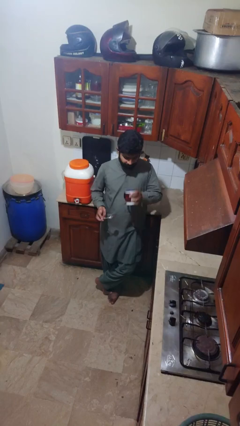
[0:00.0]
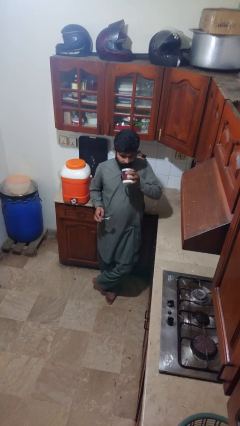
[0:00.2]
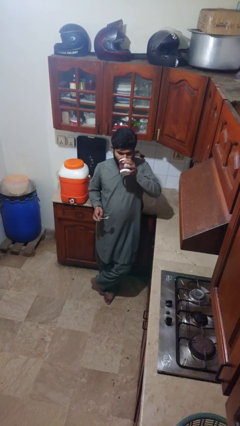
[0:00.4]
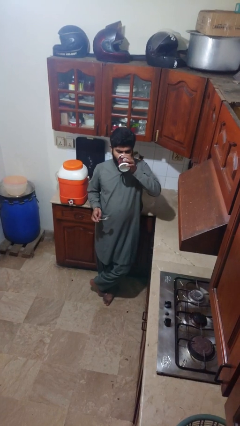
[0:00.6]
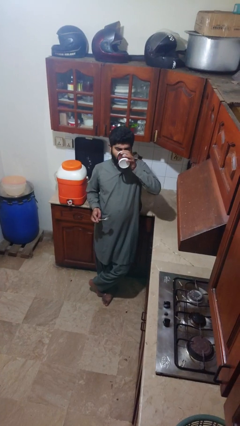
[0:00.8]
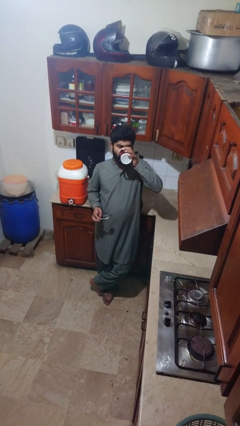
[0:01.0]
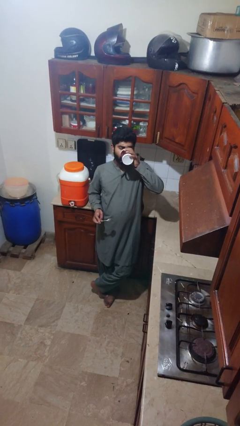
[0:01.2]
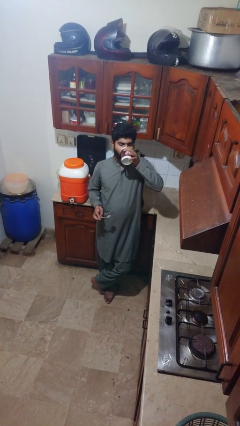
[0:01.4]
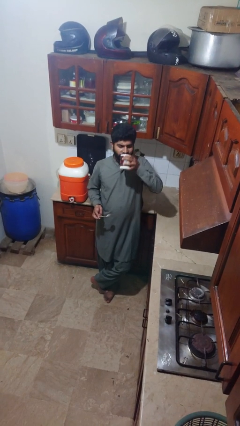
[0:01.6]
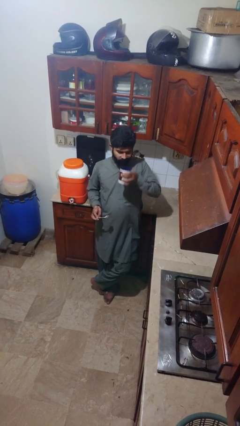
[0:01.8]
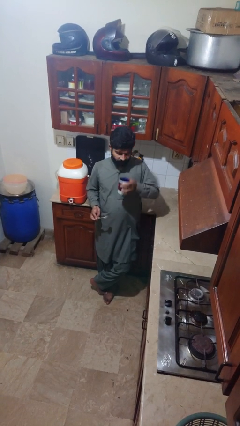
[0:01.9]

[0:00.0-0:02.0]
person drinks from mug

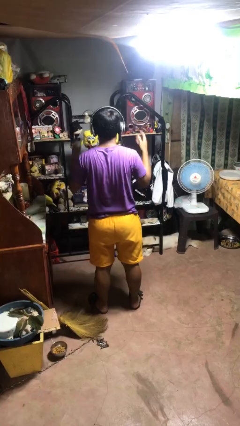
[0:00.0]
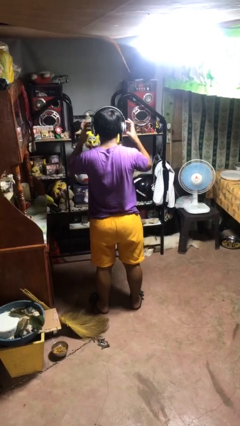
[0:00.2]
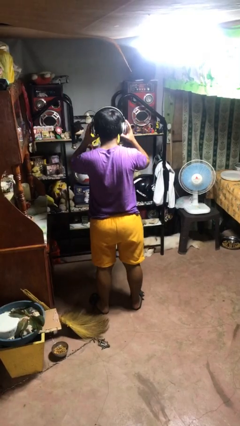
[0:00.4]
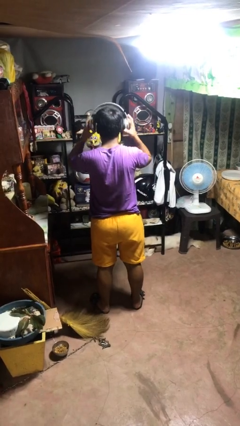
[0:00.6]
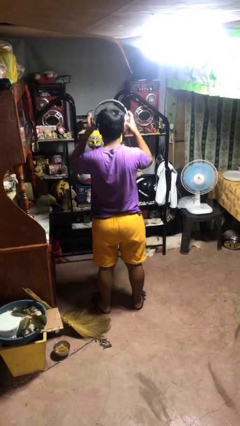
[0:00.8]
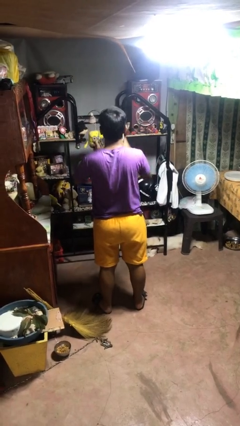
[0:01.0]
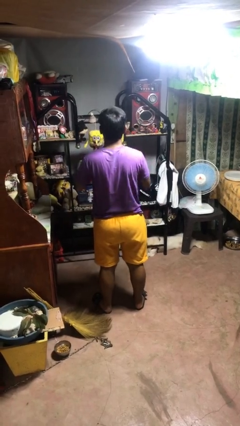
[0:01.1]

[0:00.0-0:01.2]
person takes off headphones

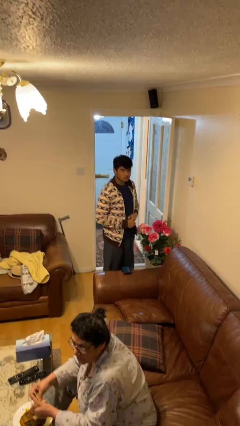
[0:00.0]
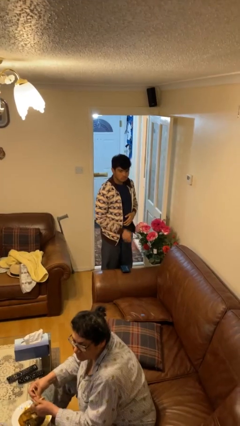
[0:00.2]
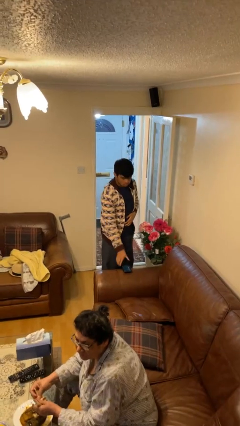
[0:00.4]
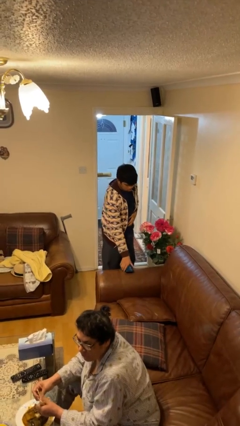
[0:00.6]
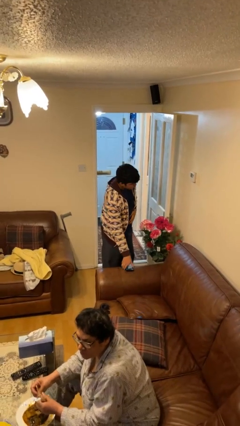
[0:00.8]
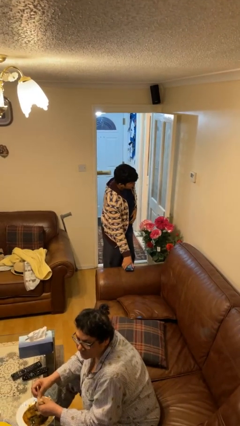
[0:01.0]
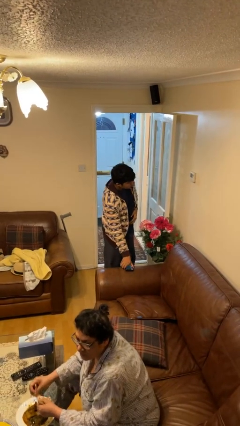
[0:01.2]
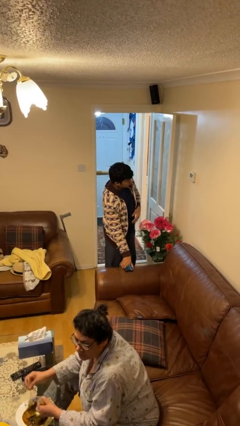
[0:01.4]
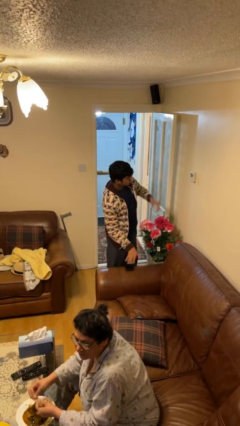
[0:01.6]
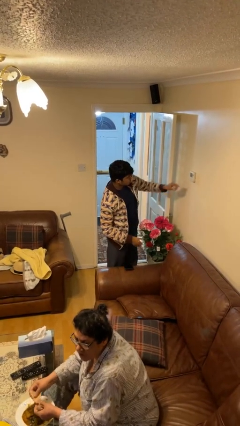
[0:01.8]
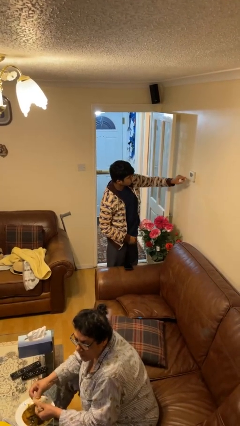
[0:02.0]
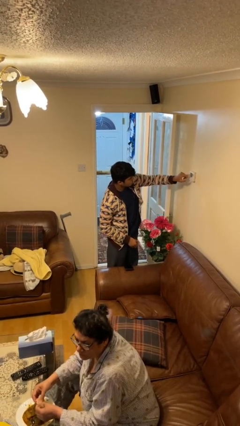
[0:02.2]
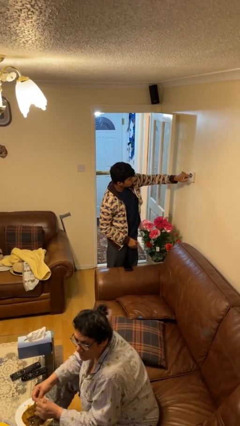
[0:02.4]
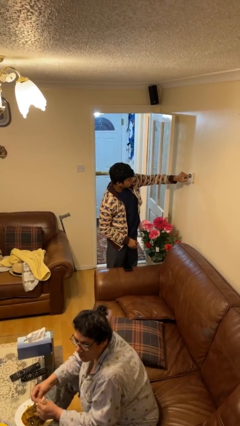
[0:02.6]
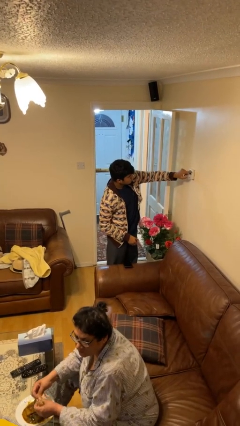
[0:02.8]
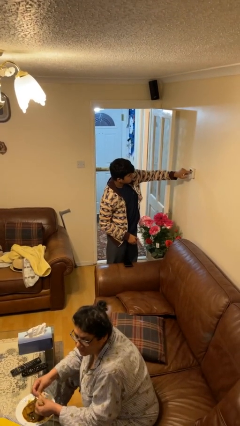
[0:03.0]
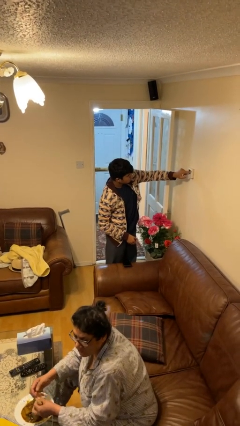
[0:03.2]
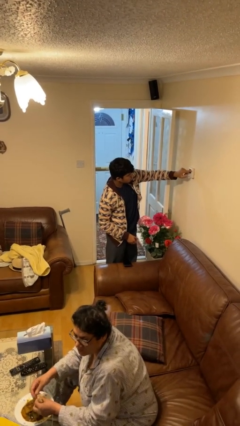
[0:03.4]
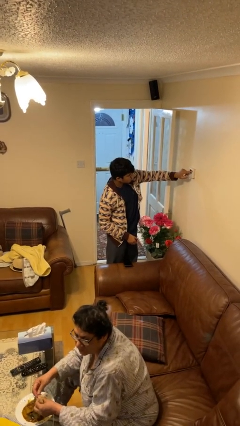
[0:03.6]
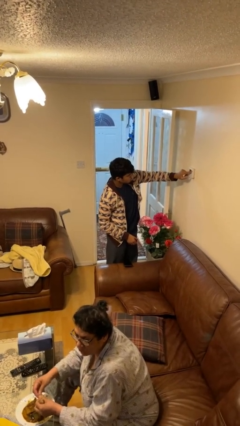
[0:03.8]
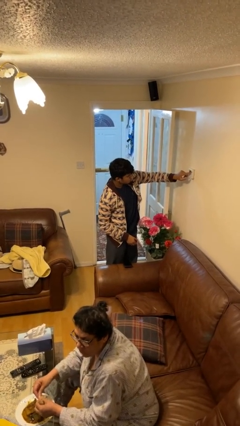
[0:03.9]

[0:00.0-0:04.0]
person adjusts thermostat

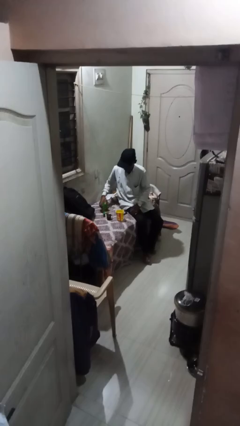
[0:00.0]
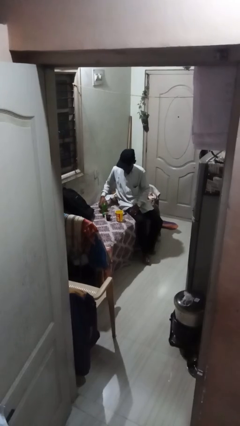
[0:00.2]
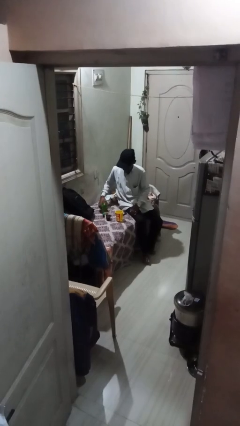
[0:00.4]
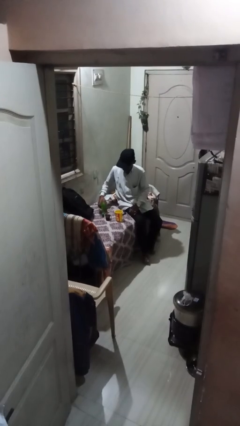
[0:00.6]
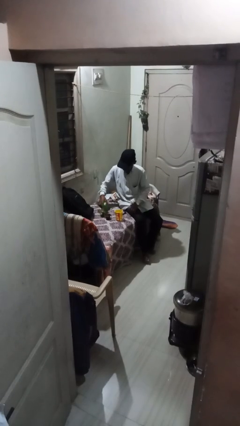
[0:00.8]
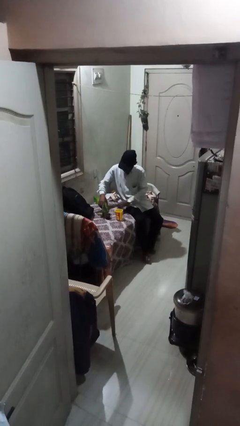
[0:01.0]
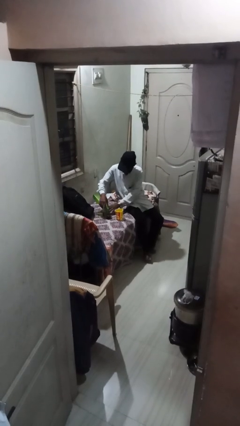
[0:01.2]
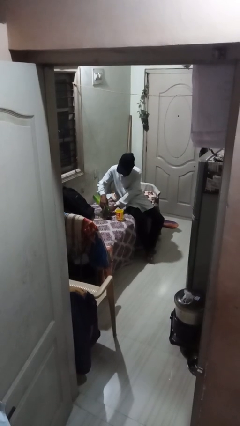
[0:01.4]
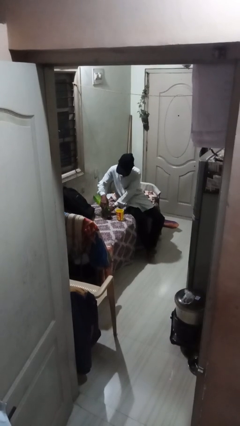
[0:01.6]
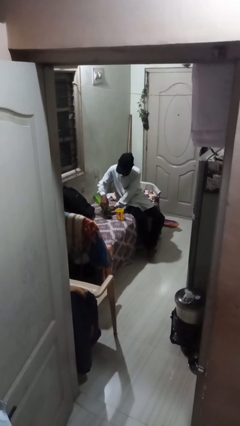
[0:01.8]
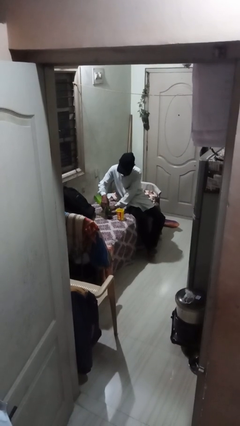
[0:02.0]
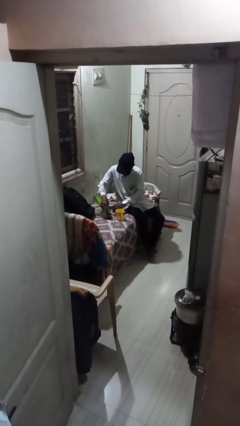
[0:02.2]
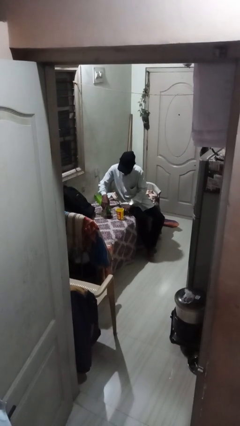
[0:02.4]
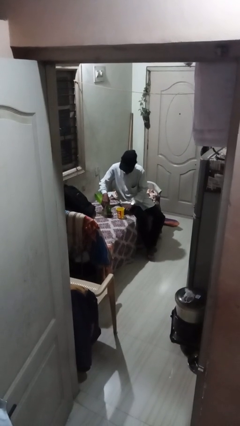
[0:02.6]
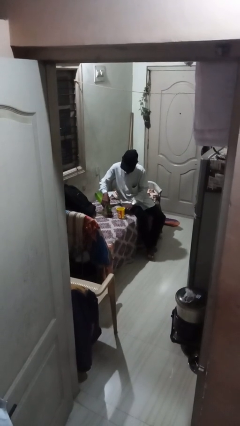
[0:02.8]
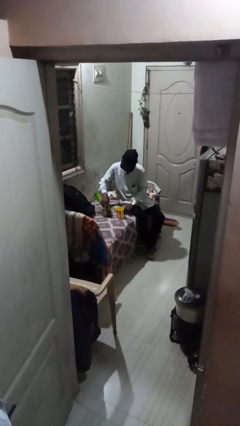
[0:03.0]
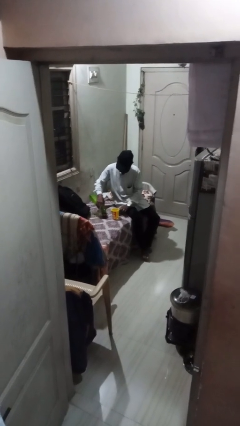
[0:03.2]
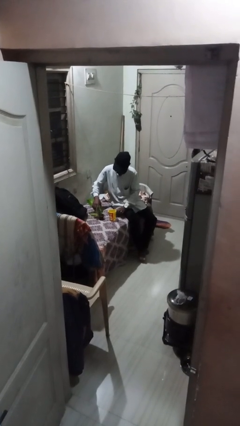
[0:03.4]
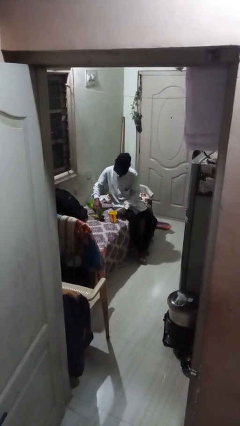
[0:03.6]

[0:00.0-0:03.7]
person pours liquid into cup

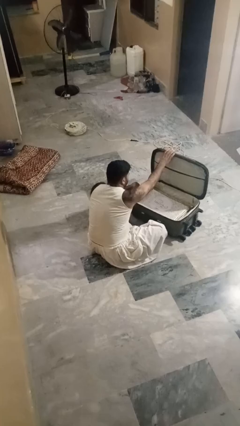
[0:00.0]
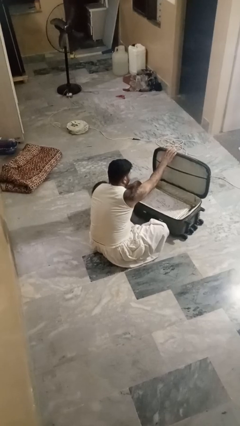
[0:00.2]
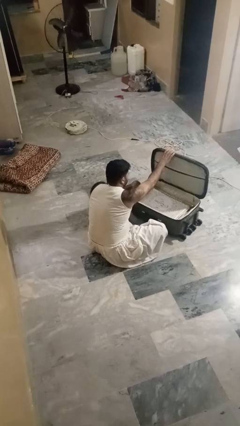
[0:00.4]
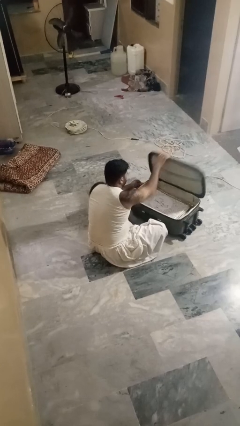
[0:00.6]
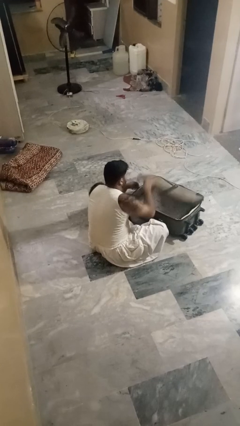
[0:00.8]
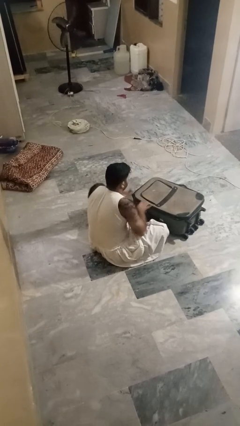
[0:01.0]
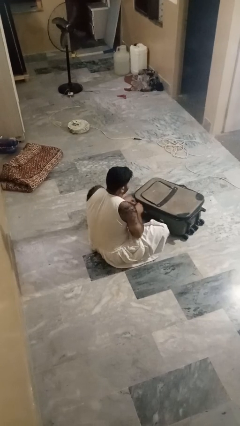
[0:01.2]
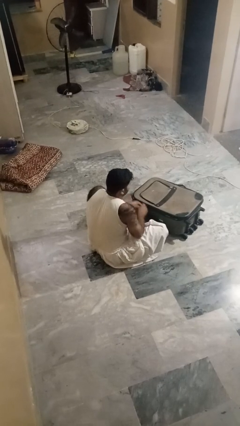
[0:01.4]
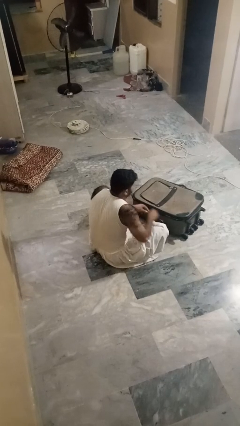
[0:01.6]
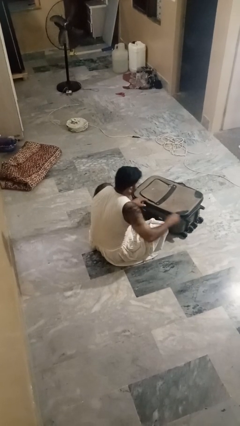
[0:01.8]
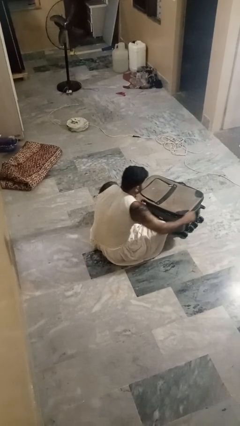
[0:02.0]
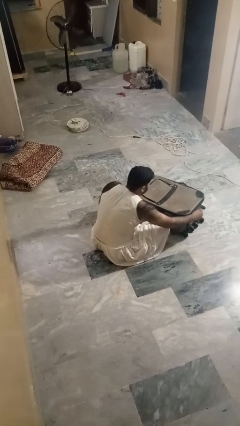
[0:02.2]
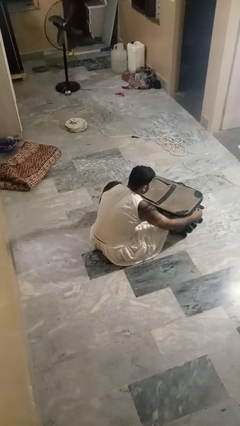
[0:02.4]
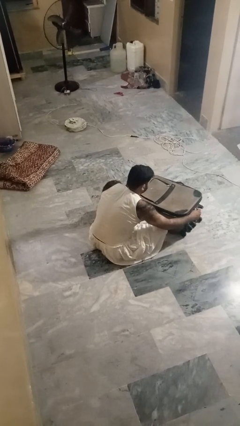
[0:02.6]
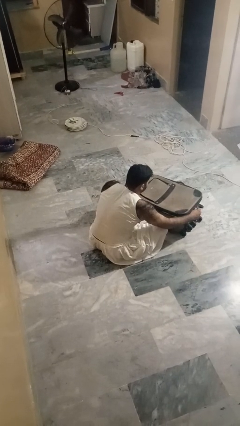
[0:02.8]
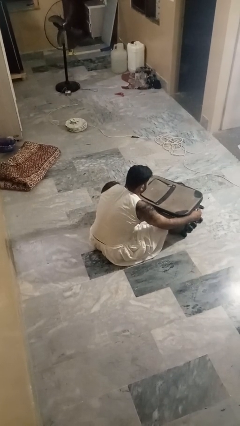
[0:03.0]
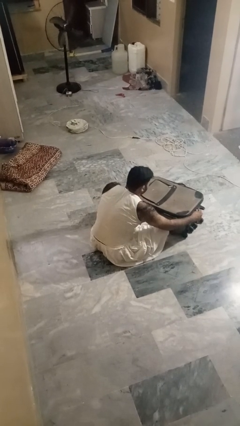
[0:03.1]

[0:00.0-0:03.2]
person closes suitcase

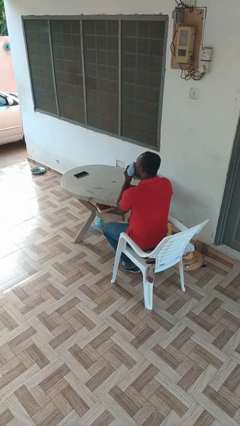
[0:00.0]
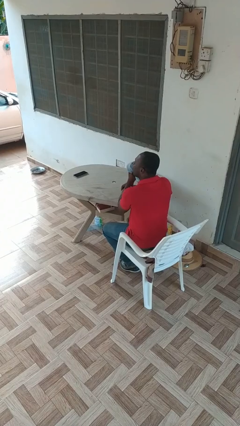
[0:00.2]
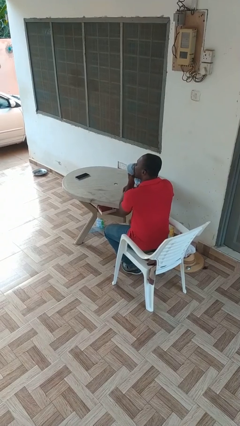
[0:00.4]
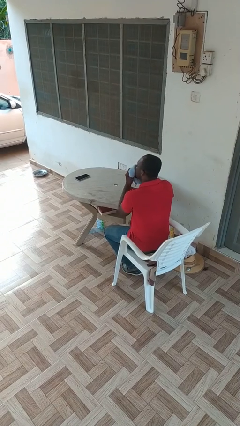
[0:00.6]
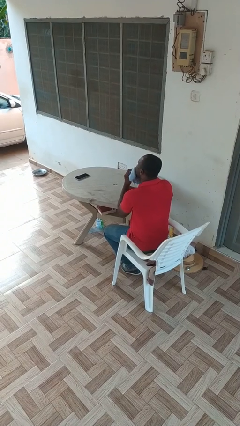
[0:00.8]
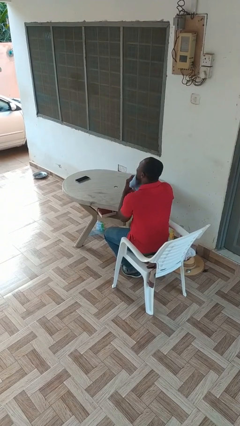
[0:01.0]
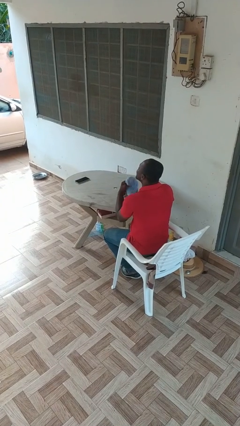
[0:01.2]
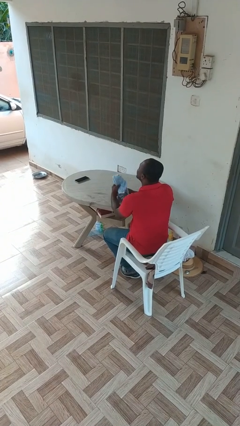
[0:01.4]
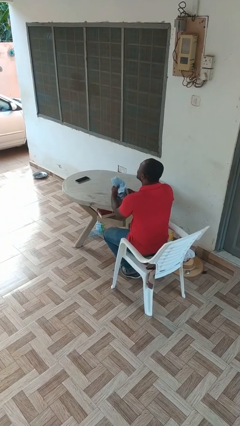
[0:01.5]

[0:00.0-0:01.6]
person wipes mouth with napkin

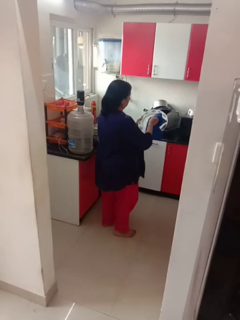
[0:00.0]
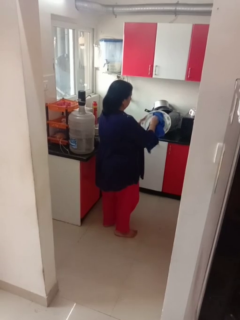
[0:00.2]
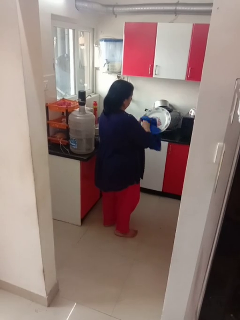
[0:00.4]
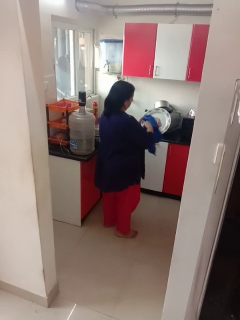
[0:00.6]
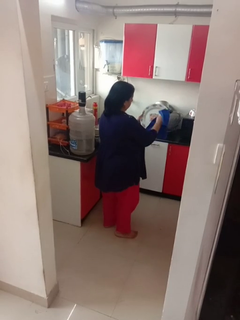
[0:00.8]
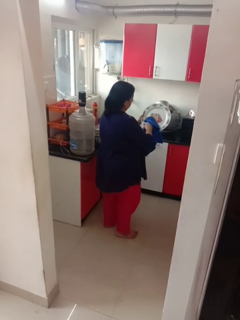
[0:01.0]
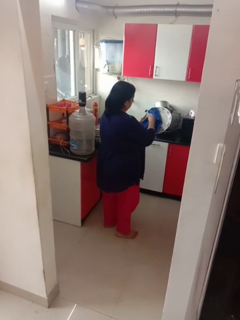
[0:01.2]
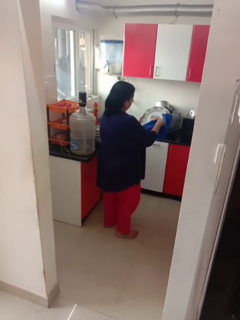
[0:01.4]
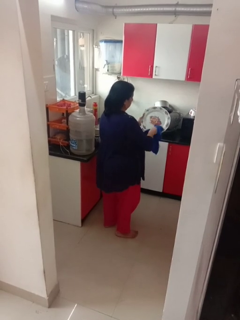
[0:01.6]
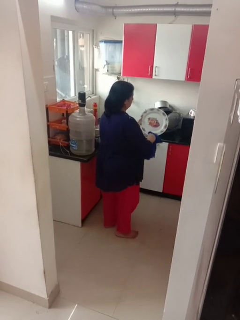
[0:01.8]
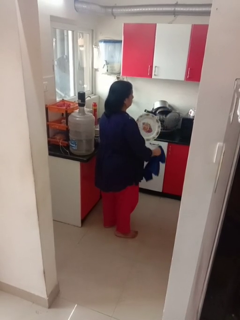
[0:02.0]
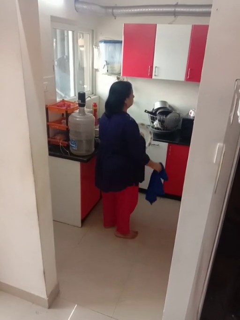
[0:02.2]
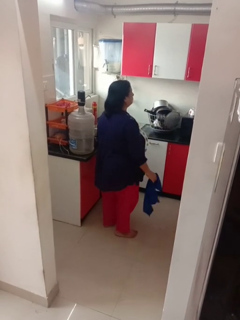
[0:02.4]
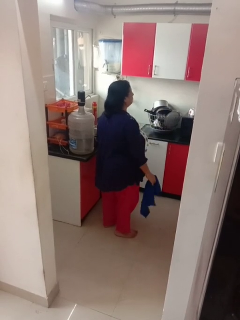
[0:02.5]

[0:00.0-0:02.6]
person dries dish
